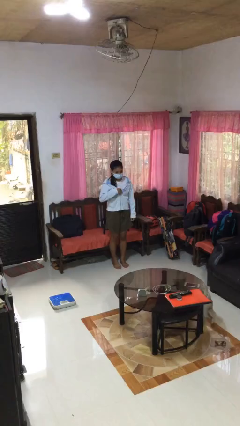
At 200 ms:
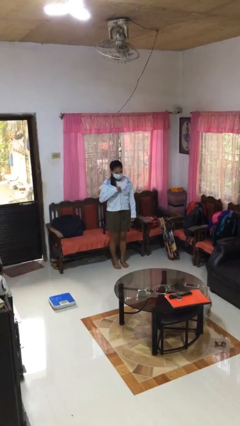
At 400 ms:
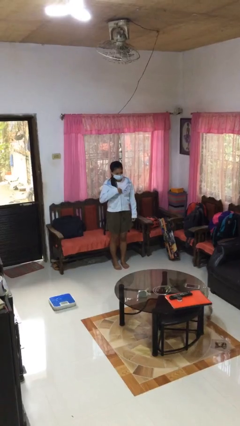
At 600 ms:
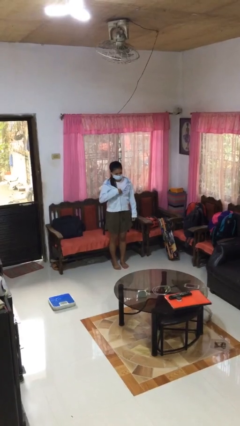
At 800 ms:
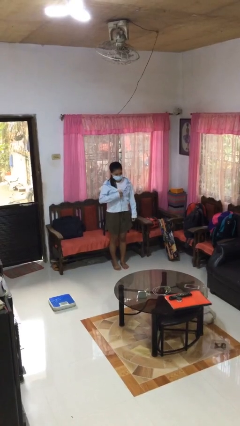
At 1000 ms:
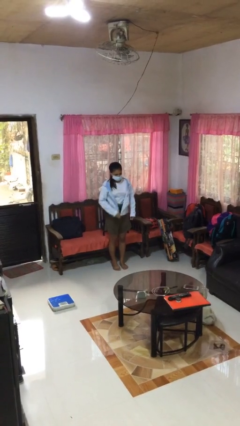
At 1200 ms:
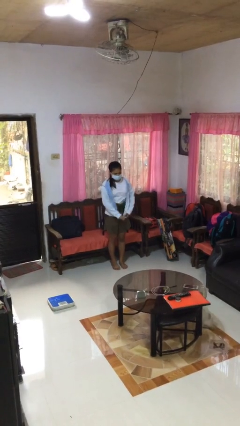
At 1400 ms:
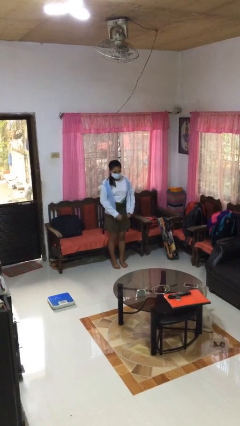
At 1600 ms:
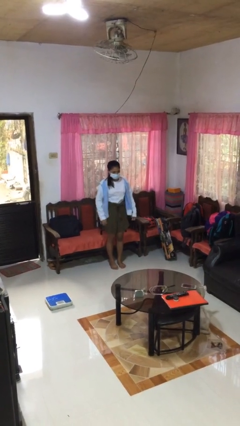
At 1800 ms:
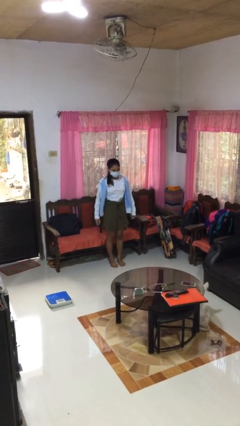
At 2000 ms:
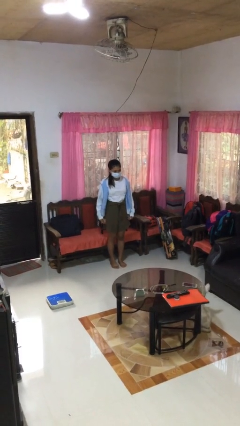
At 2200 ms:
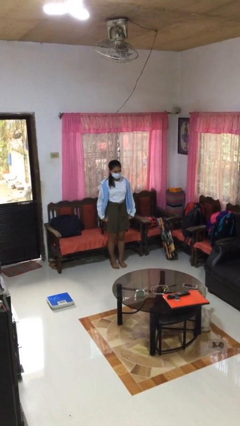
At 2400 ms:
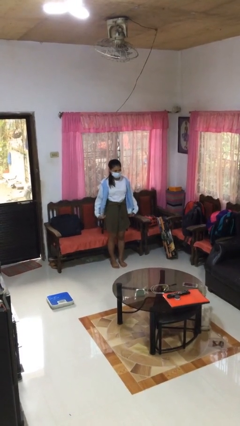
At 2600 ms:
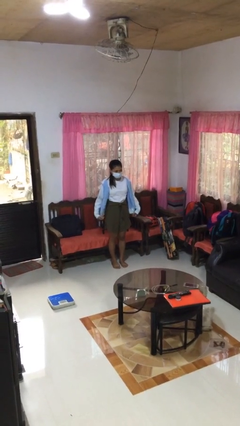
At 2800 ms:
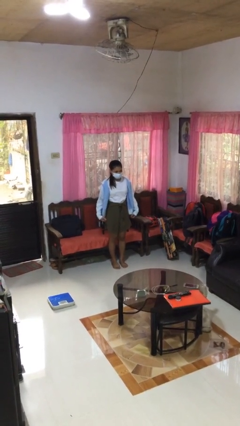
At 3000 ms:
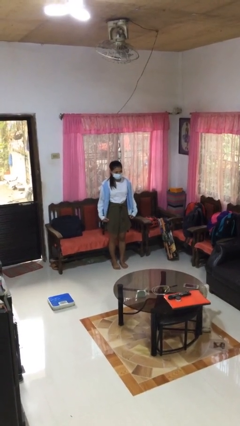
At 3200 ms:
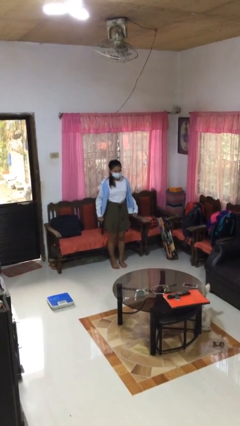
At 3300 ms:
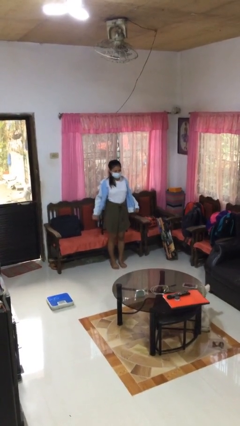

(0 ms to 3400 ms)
person unzips jacket

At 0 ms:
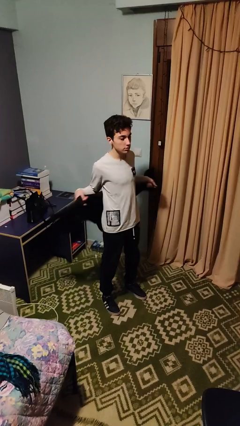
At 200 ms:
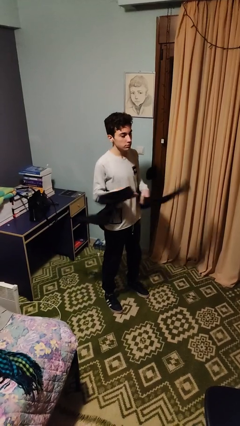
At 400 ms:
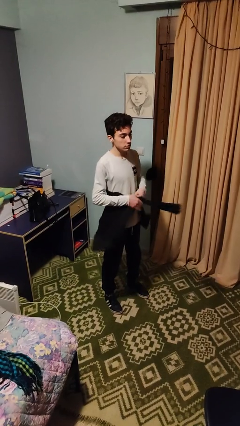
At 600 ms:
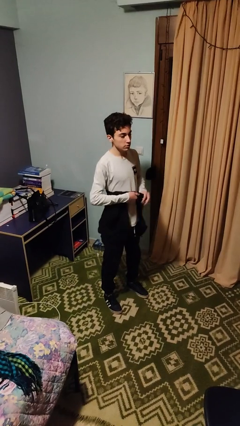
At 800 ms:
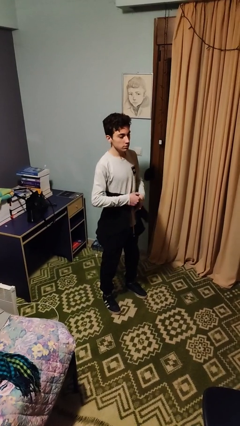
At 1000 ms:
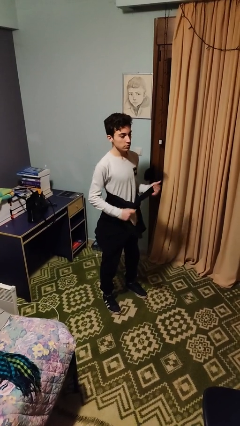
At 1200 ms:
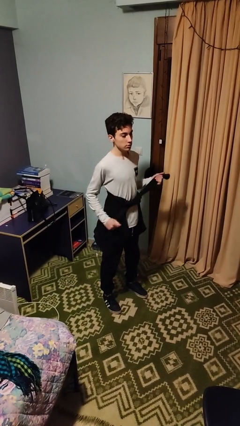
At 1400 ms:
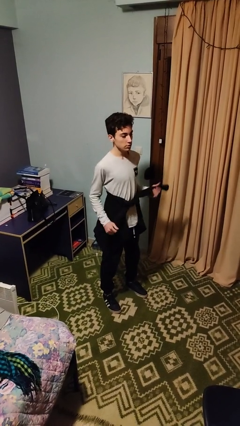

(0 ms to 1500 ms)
person ties jacket around waist

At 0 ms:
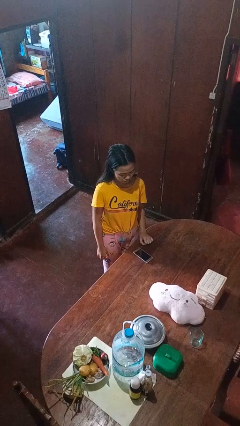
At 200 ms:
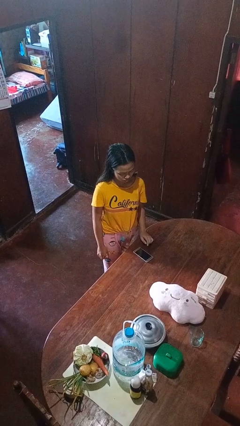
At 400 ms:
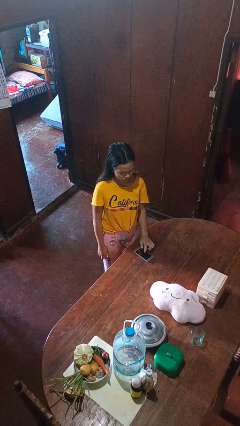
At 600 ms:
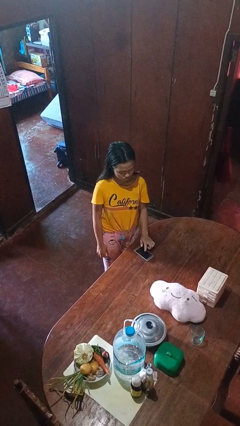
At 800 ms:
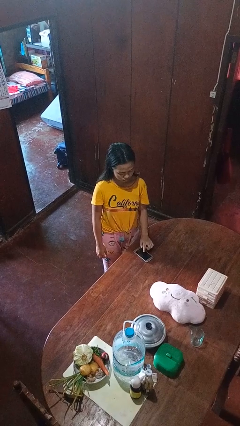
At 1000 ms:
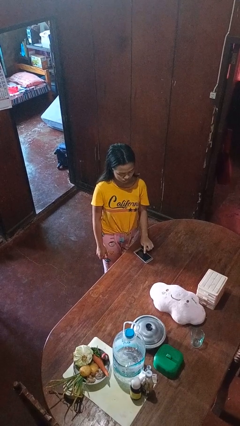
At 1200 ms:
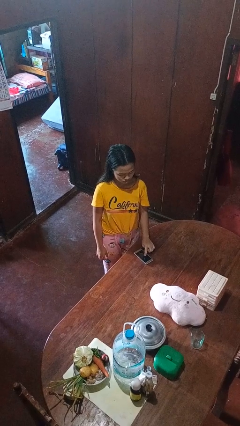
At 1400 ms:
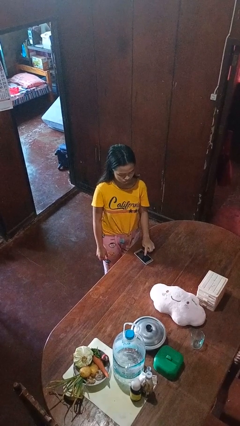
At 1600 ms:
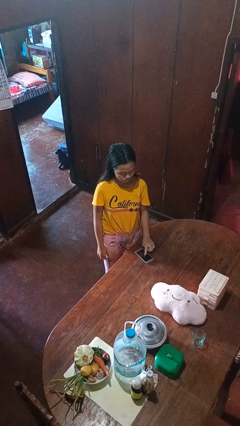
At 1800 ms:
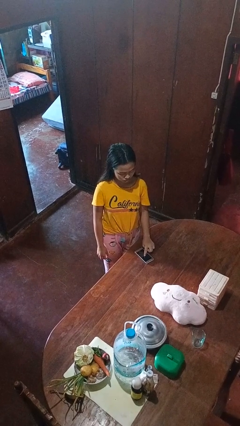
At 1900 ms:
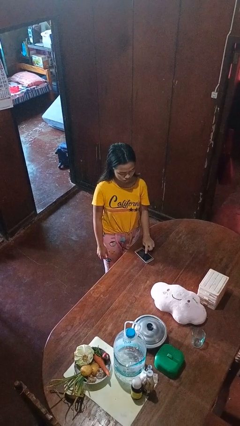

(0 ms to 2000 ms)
person taps object with finger

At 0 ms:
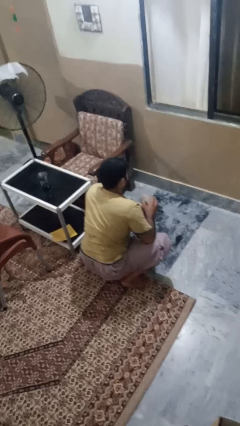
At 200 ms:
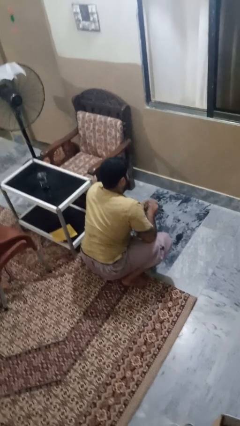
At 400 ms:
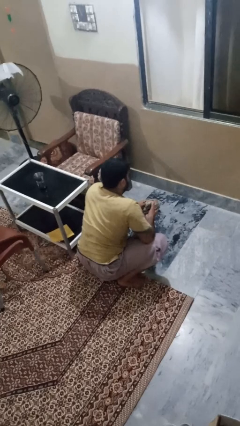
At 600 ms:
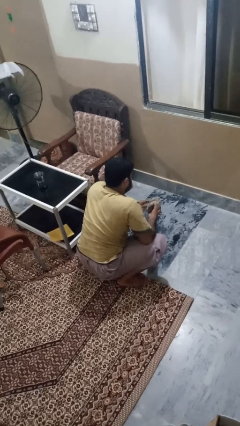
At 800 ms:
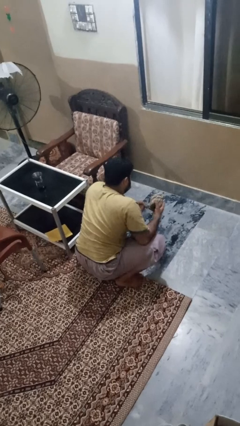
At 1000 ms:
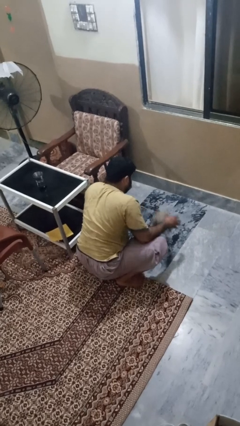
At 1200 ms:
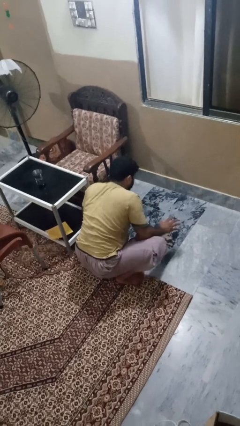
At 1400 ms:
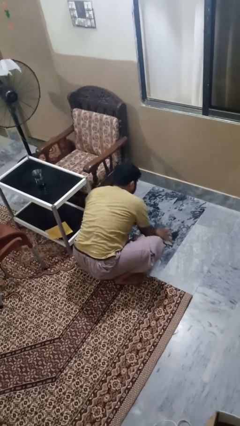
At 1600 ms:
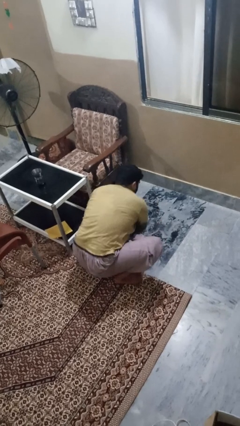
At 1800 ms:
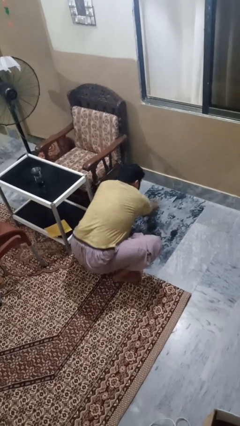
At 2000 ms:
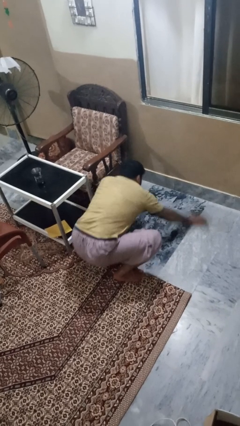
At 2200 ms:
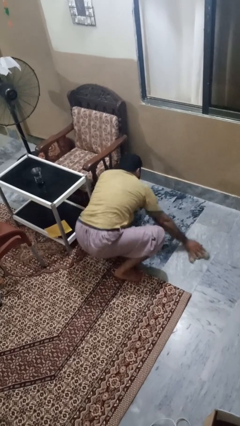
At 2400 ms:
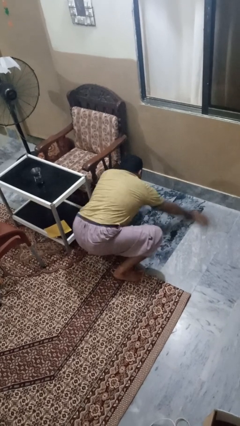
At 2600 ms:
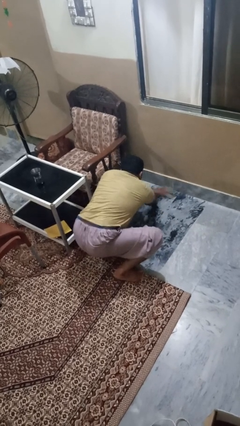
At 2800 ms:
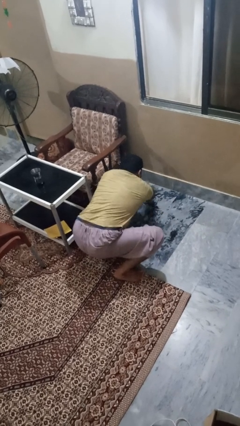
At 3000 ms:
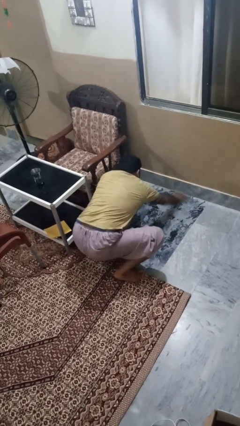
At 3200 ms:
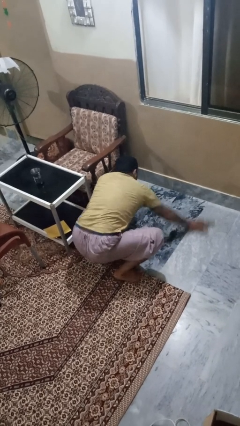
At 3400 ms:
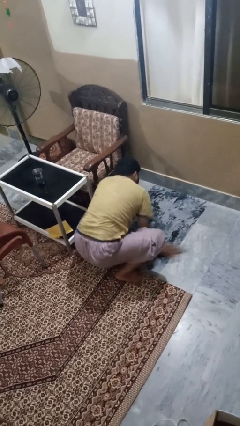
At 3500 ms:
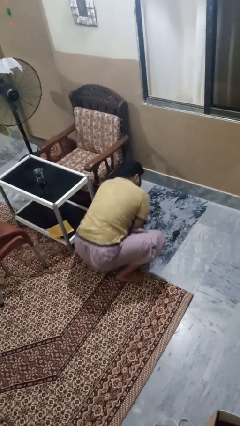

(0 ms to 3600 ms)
person mops

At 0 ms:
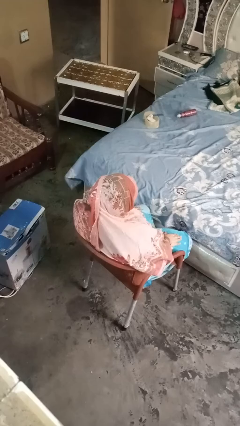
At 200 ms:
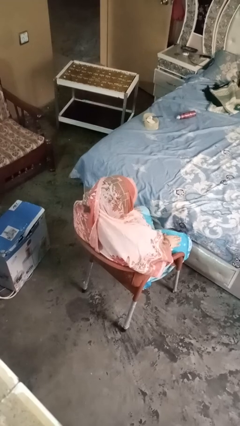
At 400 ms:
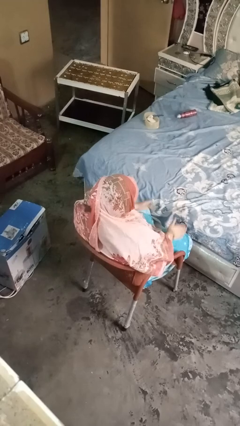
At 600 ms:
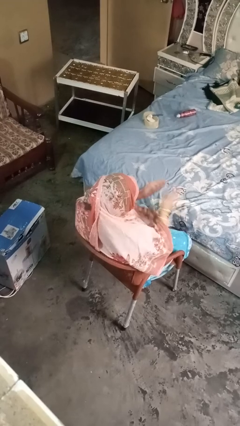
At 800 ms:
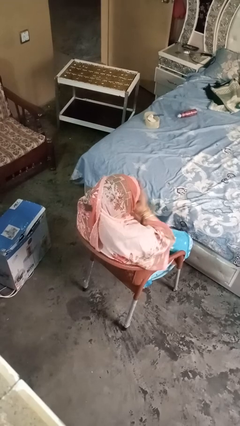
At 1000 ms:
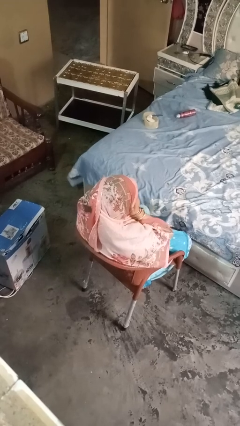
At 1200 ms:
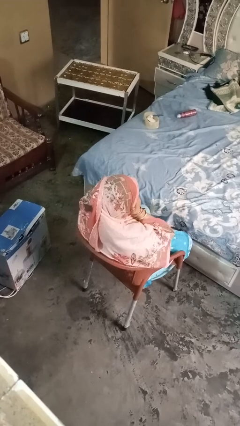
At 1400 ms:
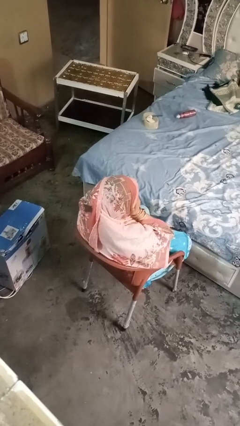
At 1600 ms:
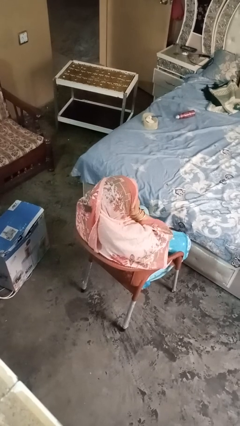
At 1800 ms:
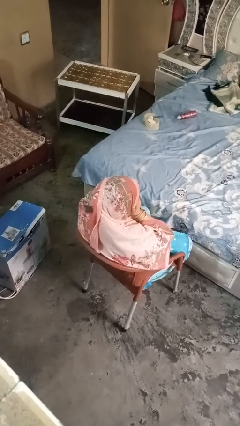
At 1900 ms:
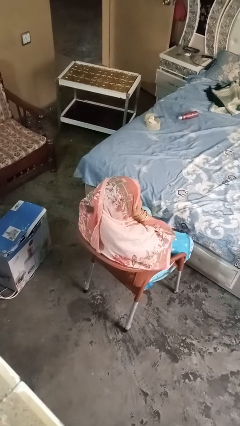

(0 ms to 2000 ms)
person covers face with hands

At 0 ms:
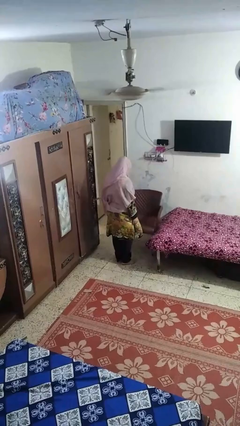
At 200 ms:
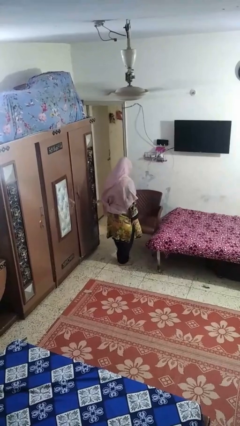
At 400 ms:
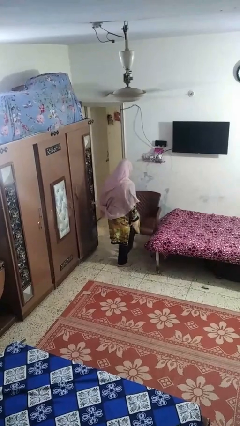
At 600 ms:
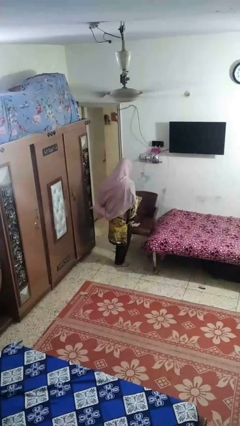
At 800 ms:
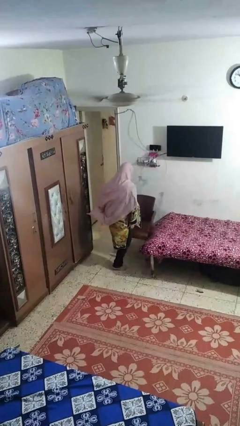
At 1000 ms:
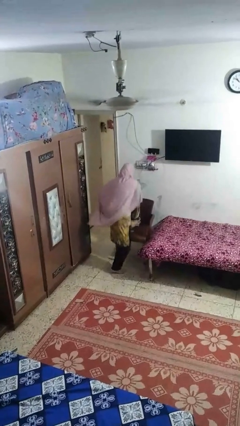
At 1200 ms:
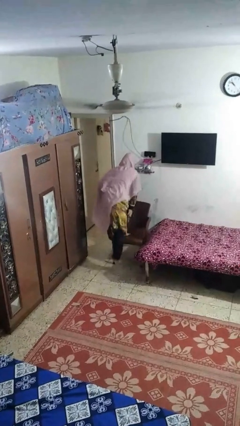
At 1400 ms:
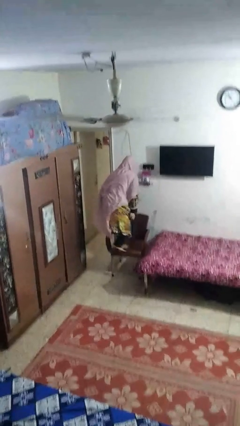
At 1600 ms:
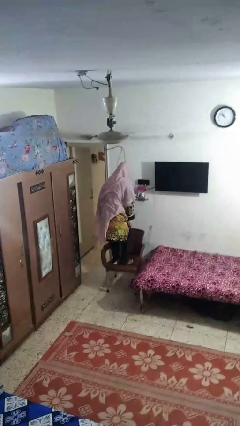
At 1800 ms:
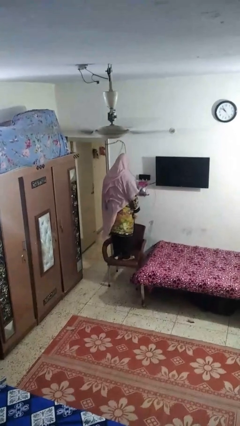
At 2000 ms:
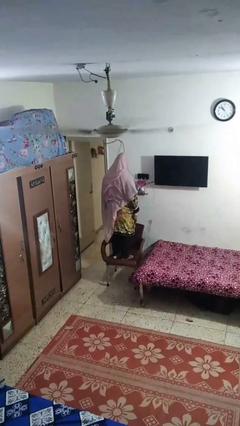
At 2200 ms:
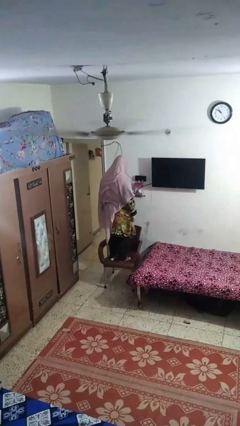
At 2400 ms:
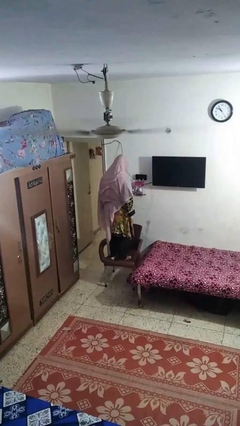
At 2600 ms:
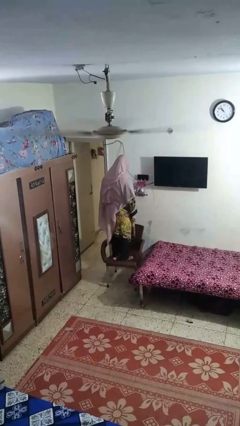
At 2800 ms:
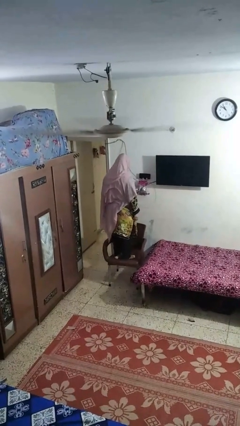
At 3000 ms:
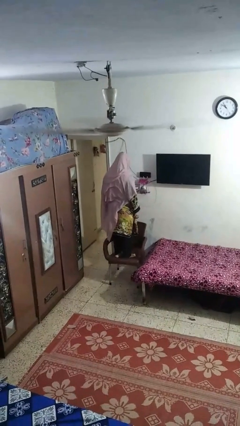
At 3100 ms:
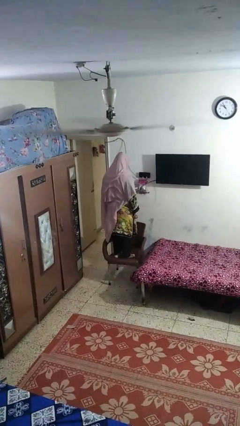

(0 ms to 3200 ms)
person climbs on chair

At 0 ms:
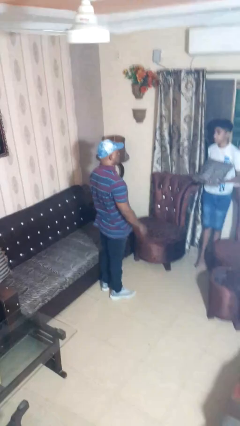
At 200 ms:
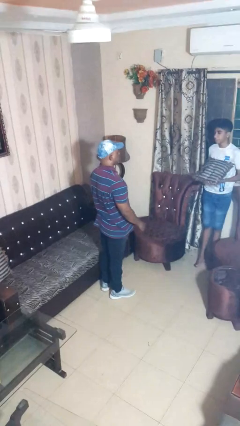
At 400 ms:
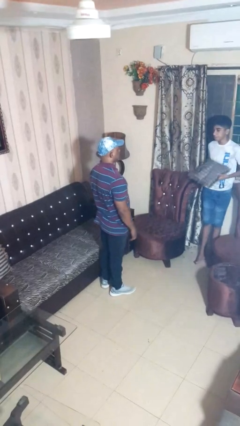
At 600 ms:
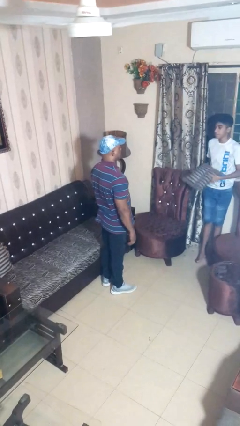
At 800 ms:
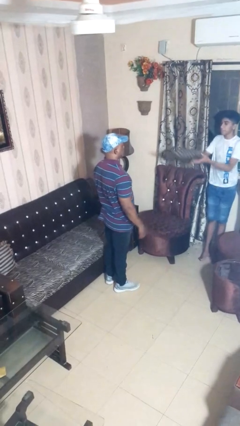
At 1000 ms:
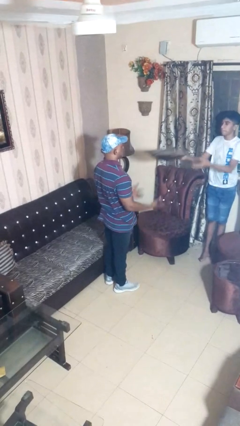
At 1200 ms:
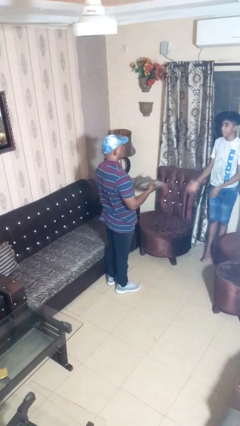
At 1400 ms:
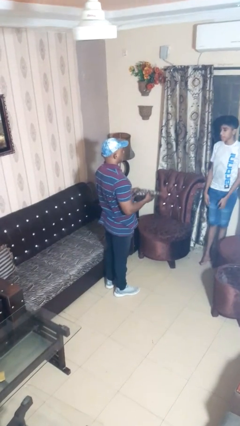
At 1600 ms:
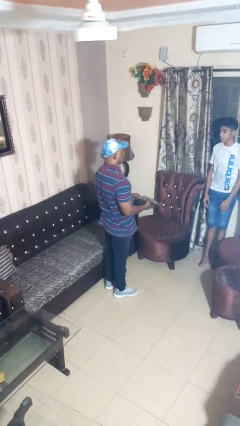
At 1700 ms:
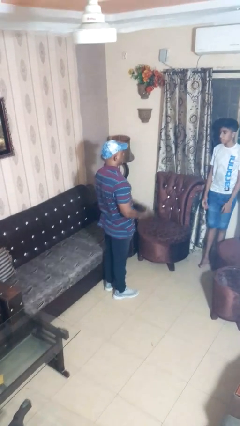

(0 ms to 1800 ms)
person catches object from person
